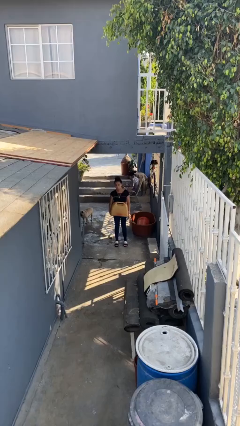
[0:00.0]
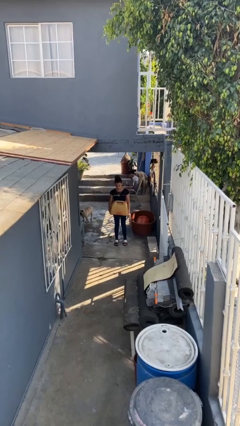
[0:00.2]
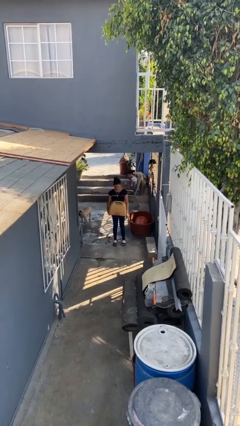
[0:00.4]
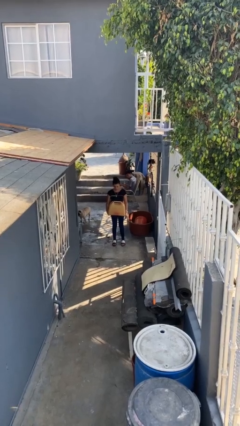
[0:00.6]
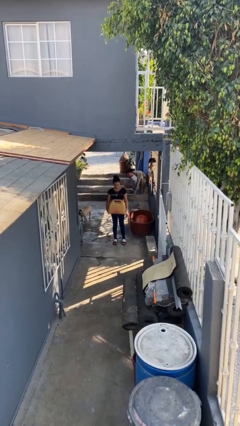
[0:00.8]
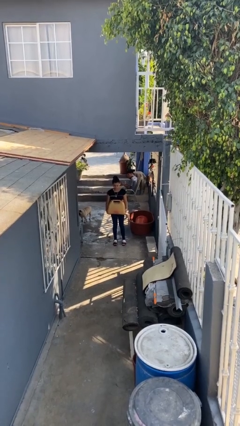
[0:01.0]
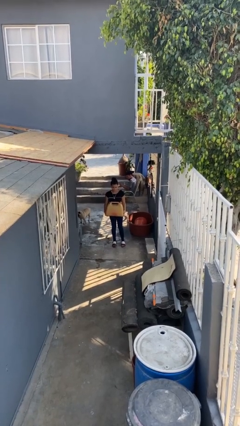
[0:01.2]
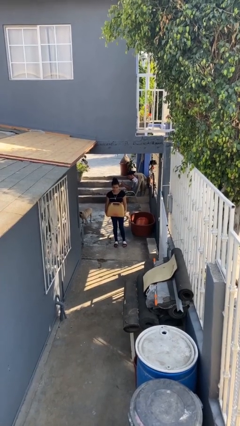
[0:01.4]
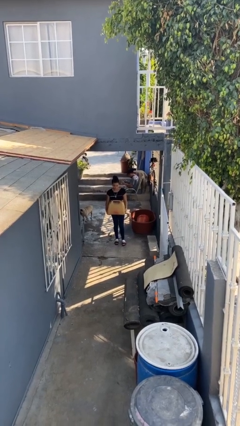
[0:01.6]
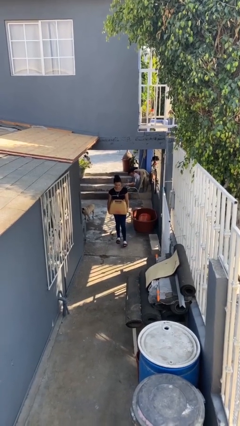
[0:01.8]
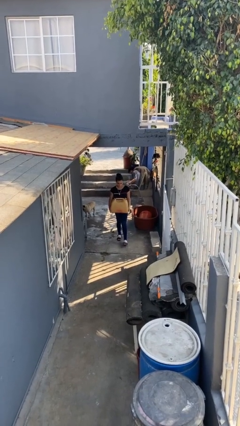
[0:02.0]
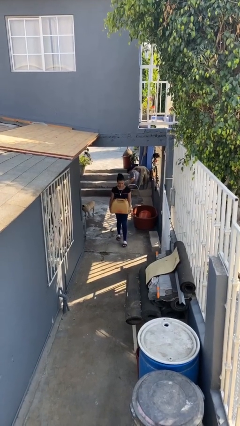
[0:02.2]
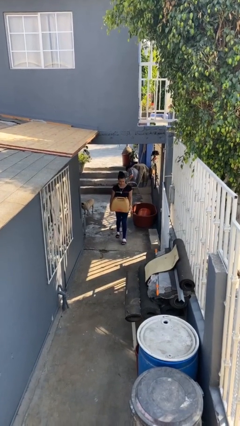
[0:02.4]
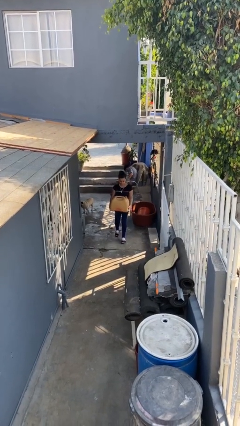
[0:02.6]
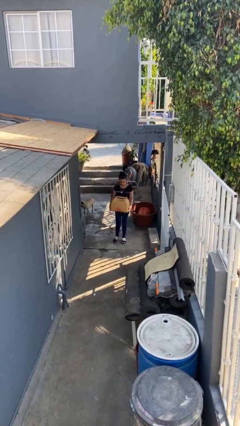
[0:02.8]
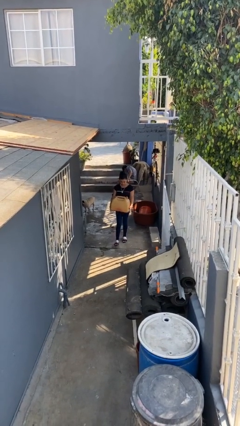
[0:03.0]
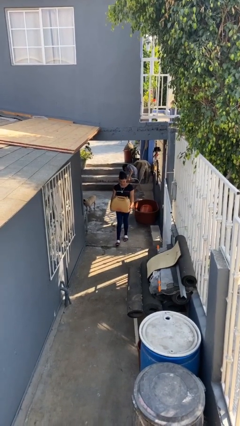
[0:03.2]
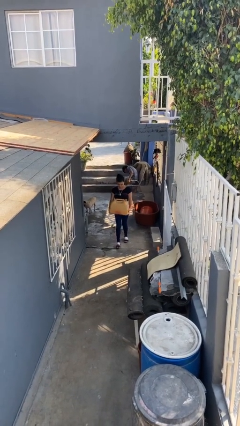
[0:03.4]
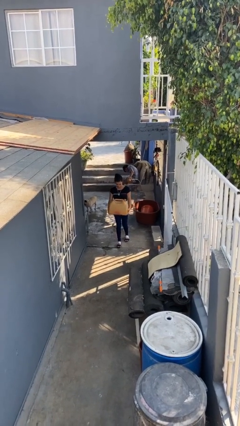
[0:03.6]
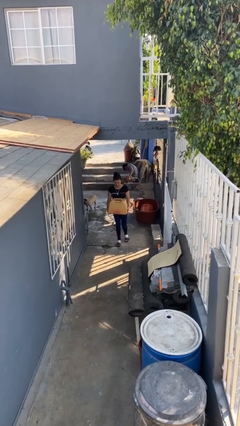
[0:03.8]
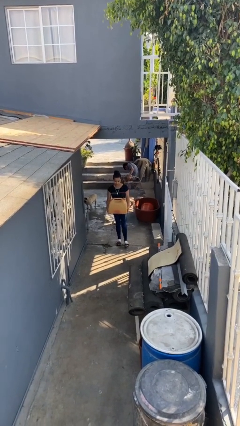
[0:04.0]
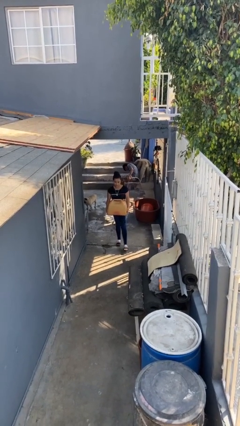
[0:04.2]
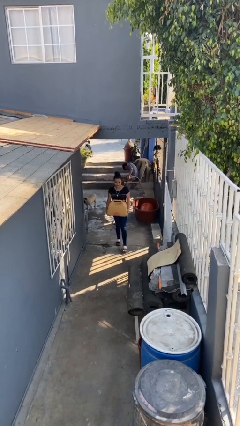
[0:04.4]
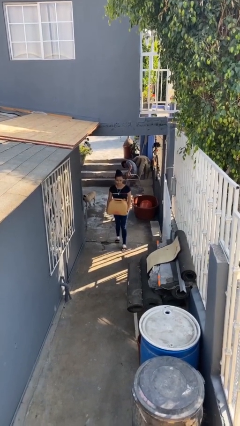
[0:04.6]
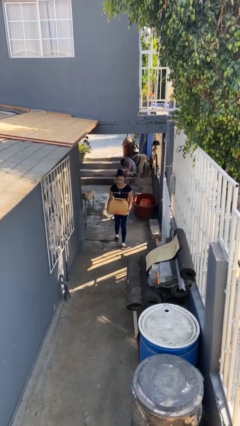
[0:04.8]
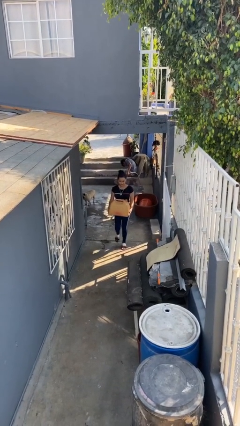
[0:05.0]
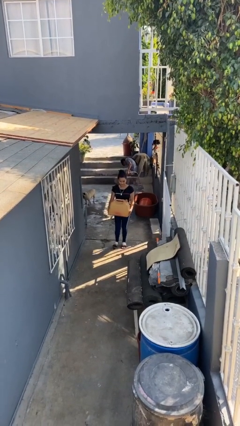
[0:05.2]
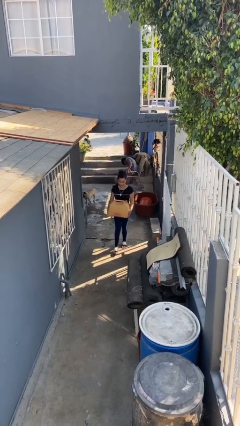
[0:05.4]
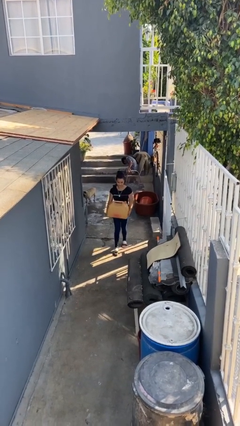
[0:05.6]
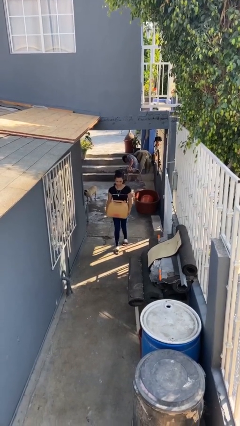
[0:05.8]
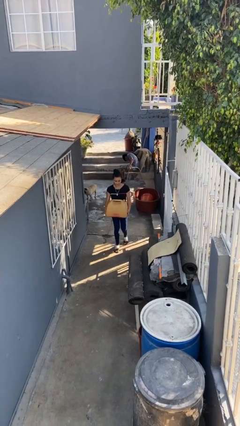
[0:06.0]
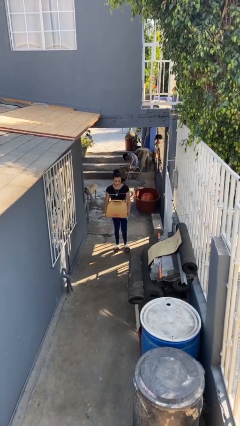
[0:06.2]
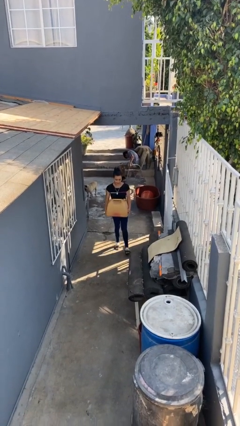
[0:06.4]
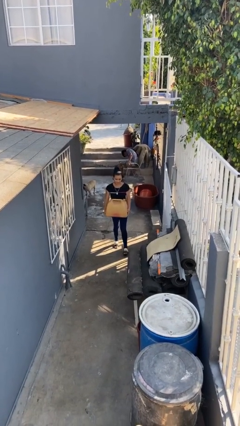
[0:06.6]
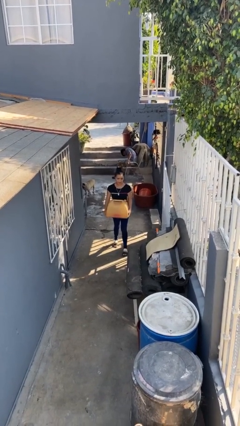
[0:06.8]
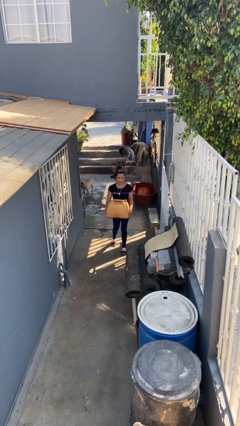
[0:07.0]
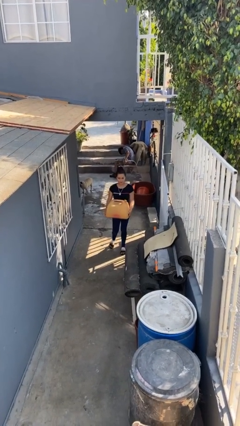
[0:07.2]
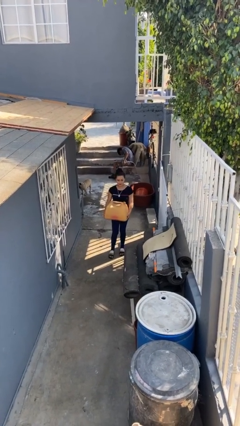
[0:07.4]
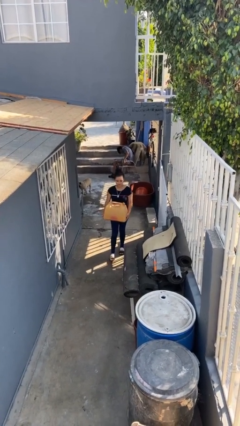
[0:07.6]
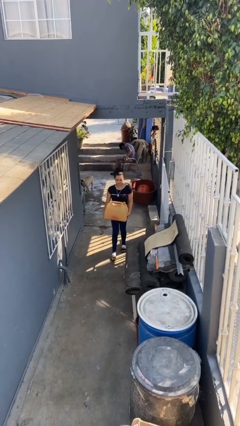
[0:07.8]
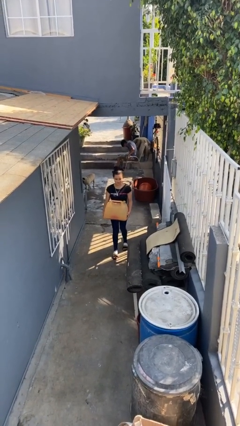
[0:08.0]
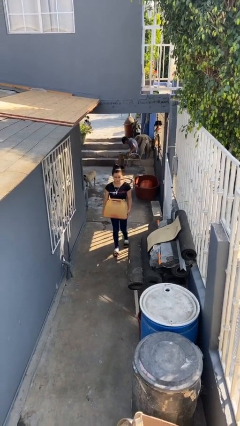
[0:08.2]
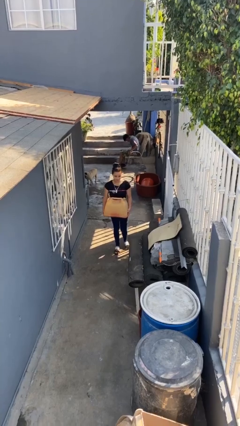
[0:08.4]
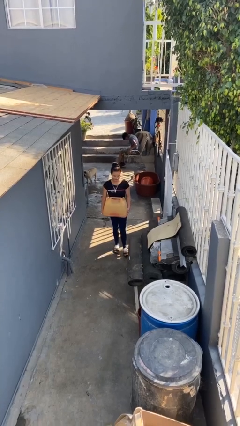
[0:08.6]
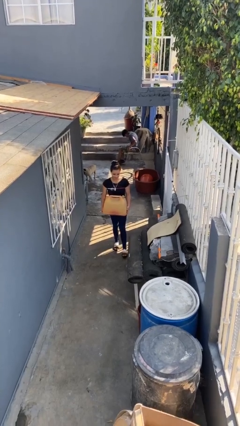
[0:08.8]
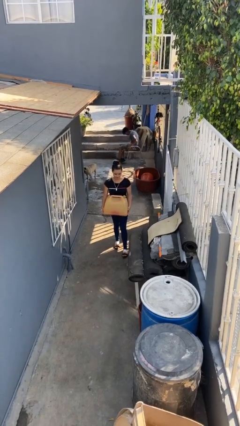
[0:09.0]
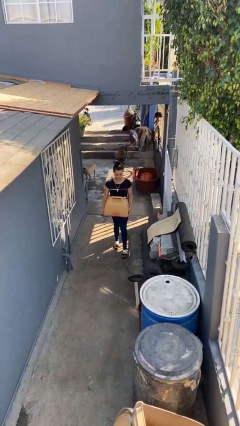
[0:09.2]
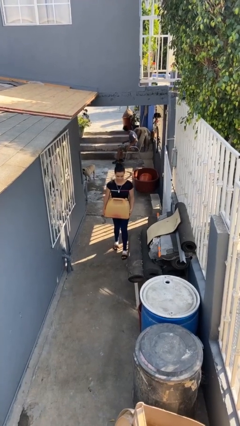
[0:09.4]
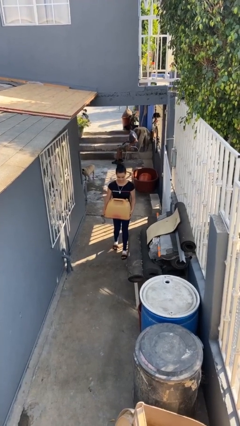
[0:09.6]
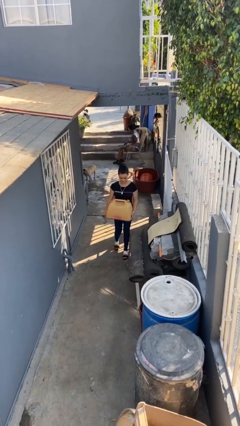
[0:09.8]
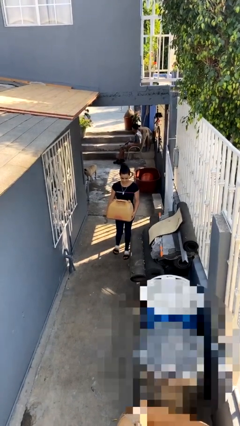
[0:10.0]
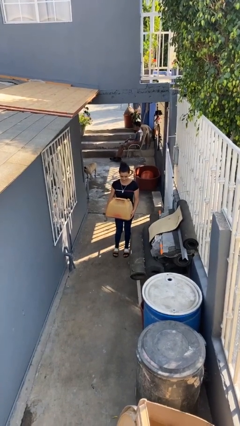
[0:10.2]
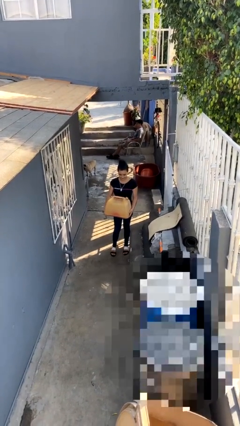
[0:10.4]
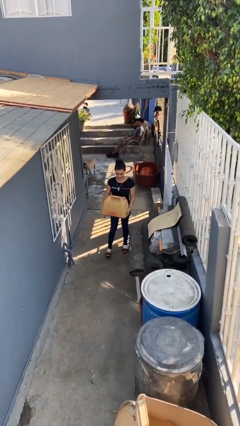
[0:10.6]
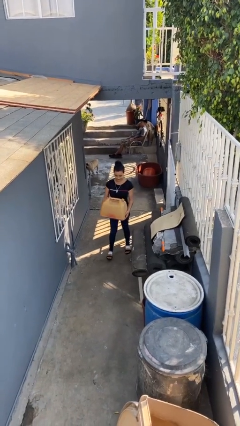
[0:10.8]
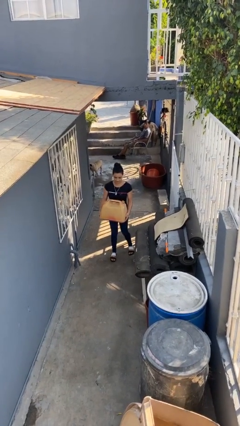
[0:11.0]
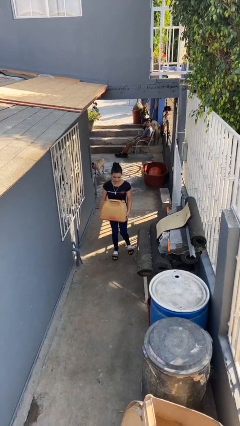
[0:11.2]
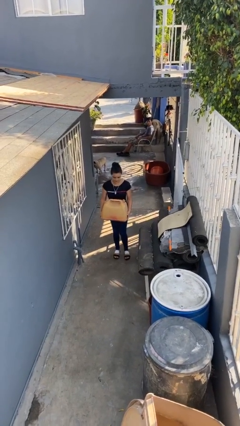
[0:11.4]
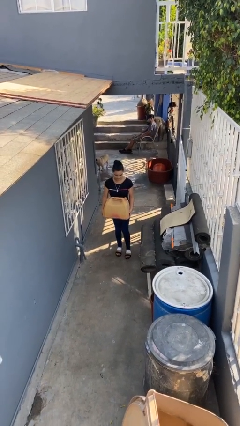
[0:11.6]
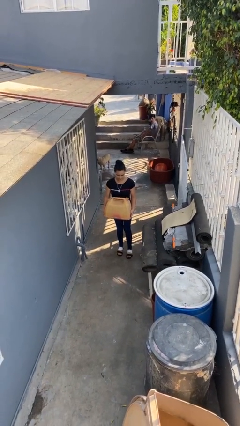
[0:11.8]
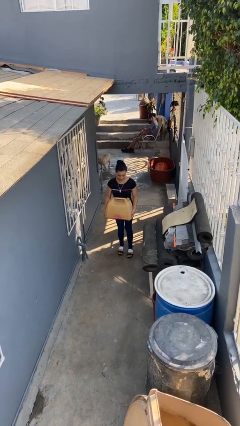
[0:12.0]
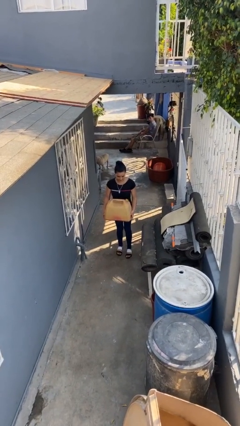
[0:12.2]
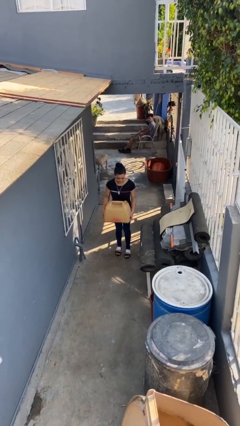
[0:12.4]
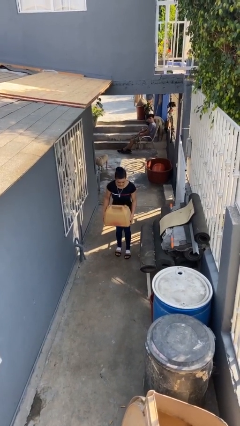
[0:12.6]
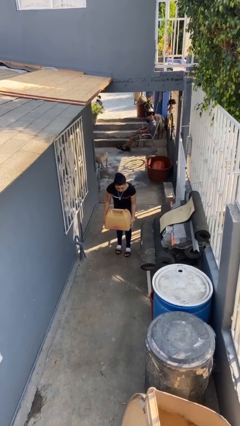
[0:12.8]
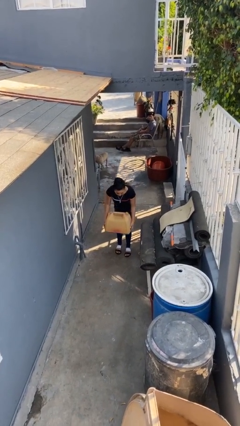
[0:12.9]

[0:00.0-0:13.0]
person carries heavy object

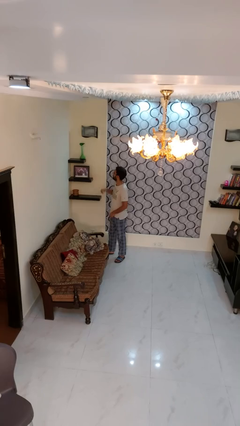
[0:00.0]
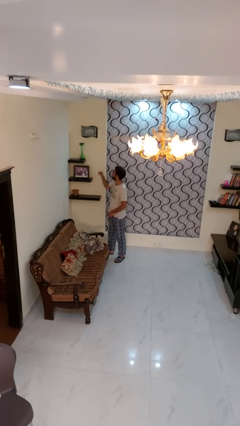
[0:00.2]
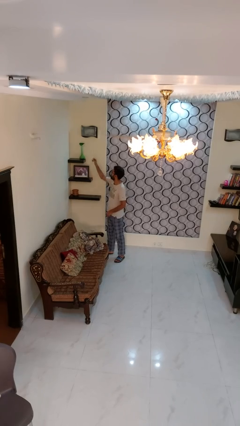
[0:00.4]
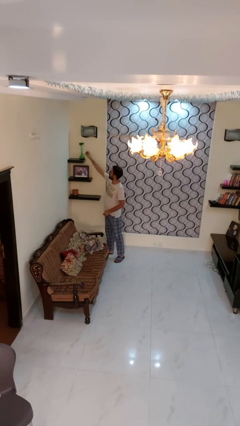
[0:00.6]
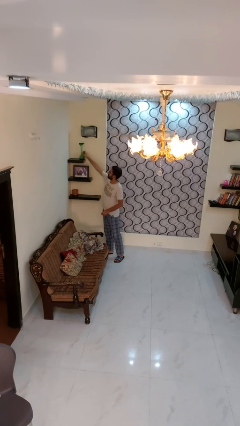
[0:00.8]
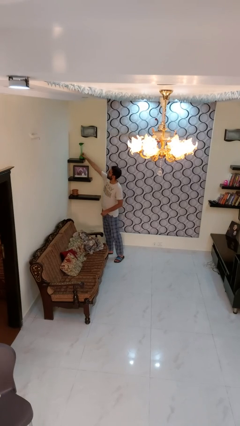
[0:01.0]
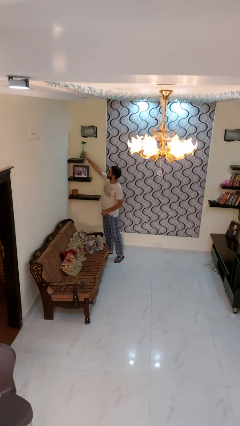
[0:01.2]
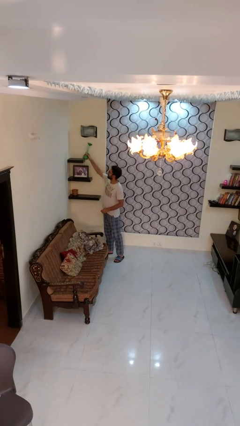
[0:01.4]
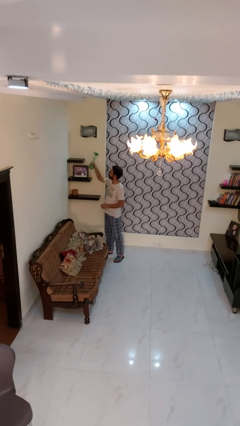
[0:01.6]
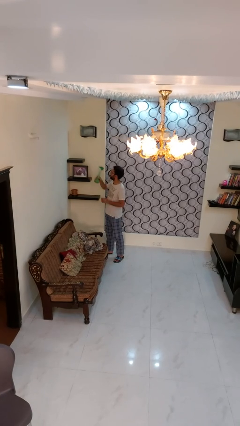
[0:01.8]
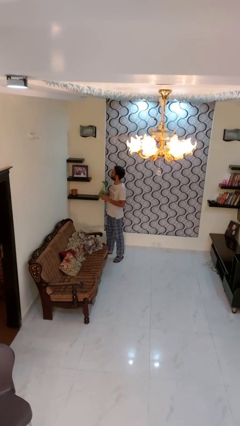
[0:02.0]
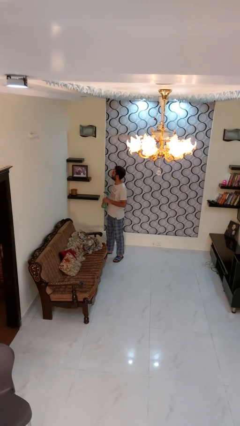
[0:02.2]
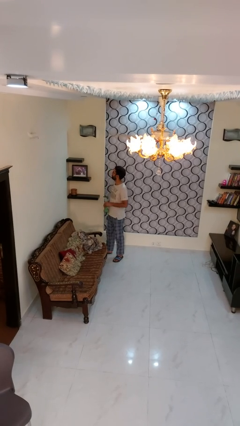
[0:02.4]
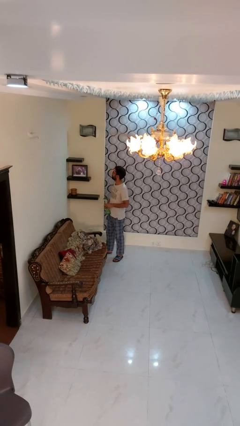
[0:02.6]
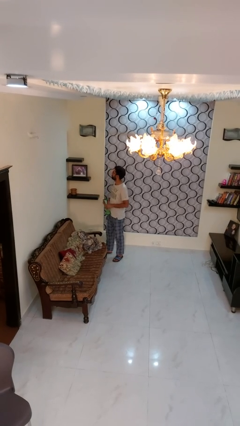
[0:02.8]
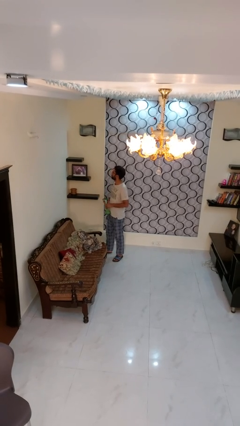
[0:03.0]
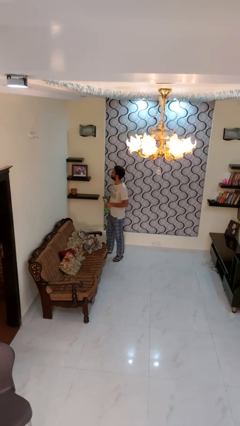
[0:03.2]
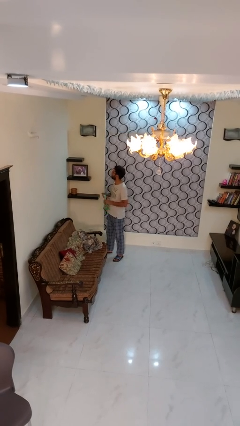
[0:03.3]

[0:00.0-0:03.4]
person picks up object from shelf

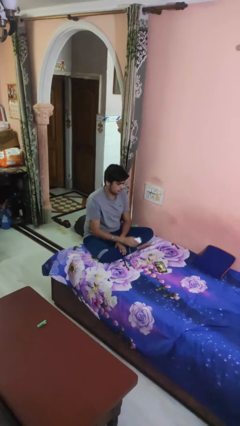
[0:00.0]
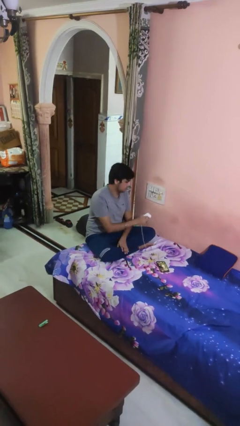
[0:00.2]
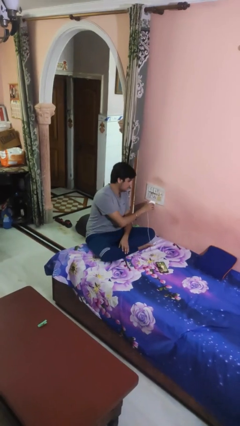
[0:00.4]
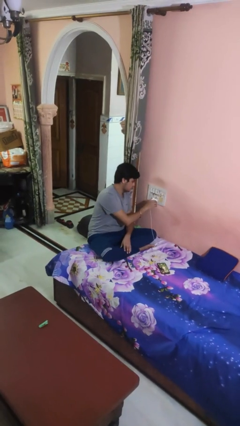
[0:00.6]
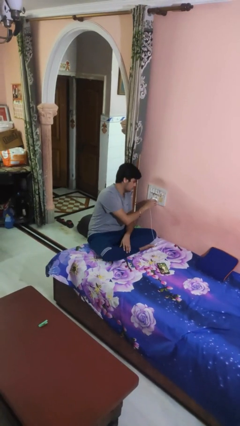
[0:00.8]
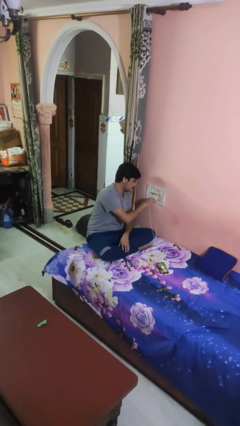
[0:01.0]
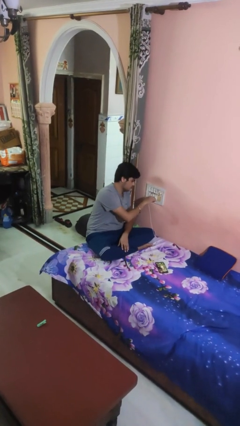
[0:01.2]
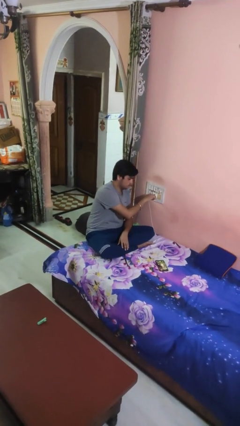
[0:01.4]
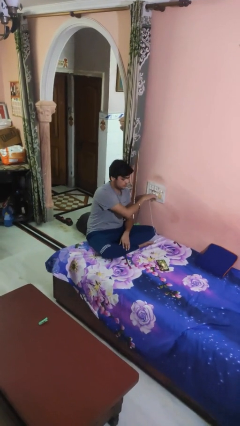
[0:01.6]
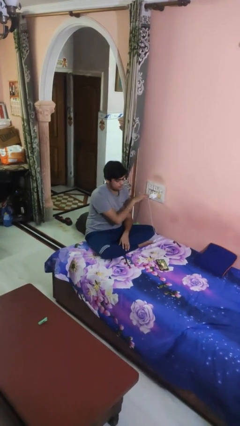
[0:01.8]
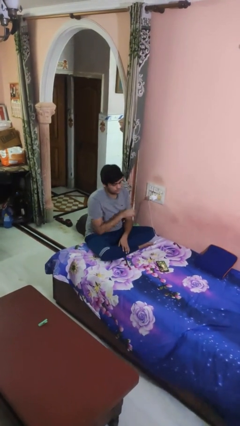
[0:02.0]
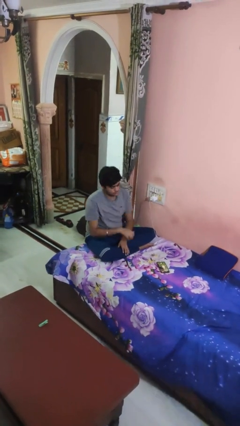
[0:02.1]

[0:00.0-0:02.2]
person plugs into electrical socket
